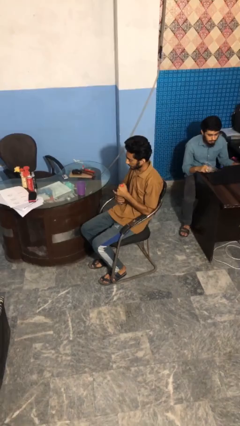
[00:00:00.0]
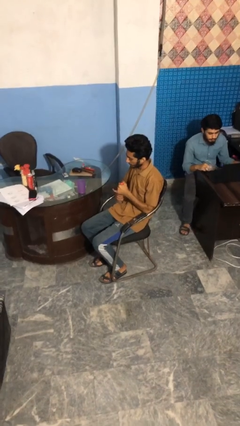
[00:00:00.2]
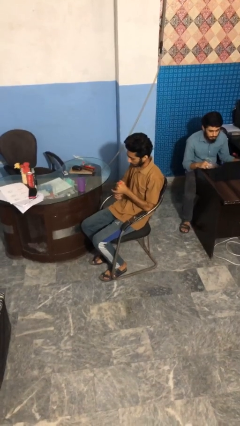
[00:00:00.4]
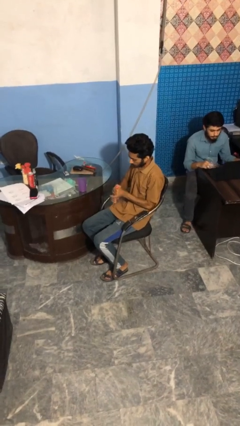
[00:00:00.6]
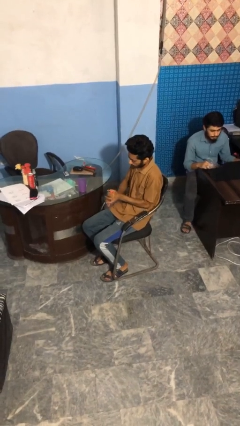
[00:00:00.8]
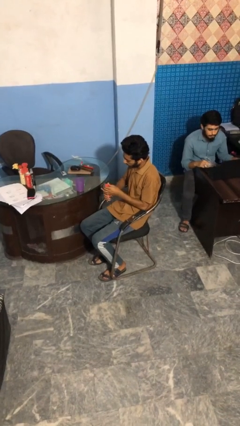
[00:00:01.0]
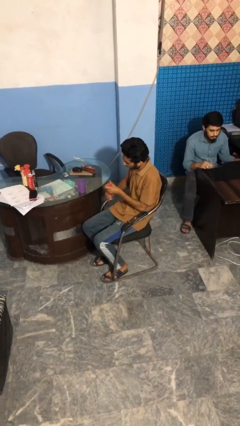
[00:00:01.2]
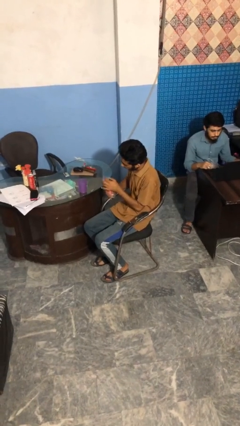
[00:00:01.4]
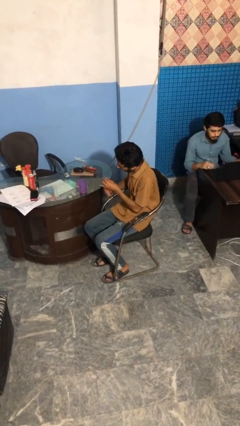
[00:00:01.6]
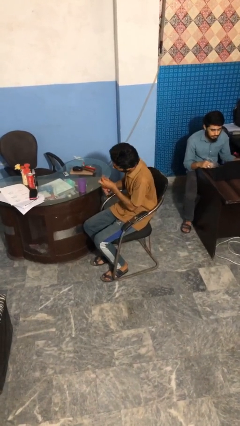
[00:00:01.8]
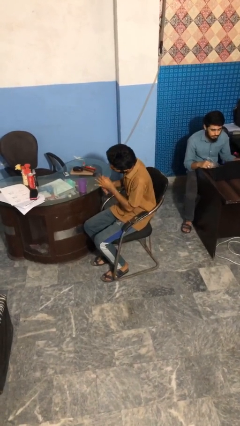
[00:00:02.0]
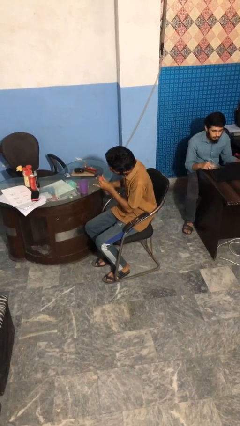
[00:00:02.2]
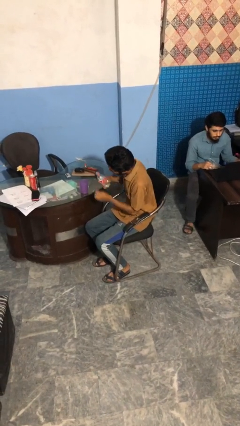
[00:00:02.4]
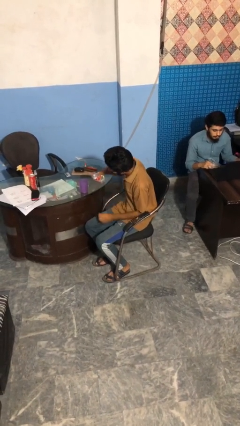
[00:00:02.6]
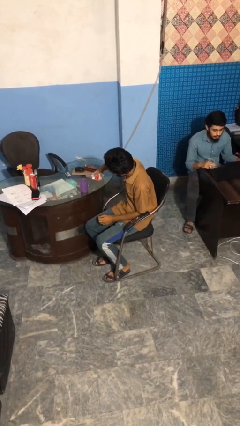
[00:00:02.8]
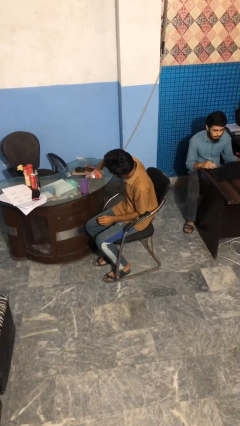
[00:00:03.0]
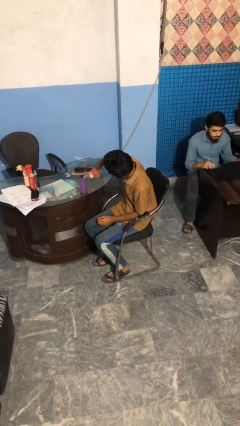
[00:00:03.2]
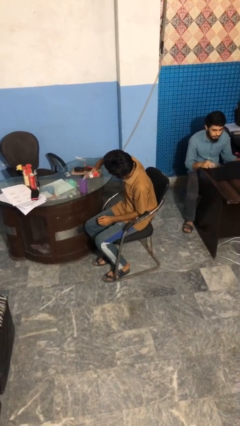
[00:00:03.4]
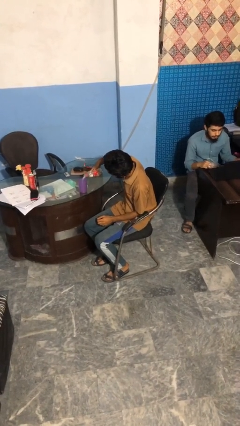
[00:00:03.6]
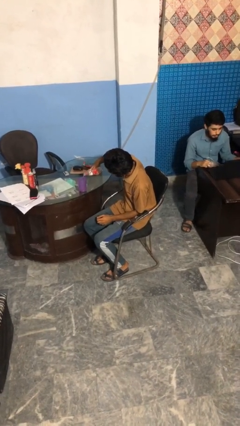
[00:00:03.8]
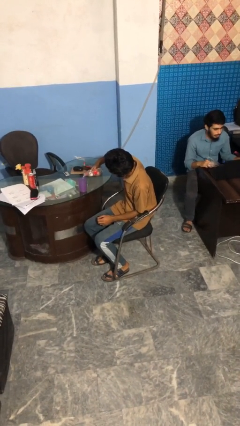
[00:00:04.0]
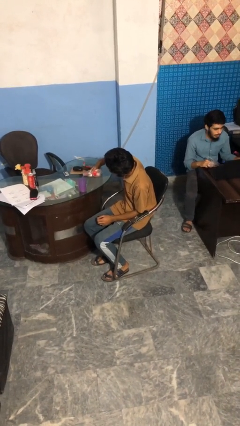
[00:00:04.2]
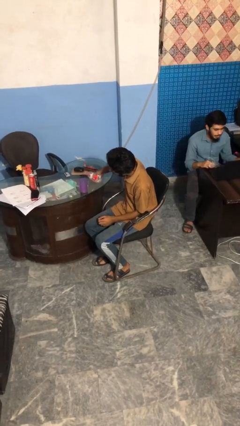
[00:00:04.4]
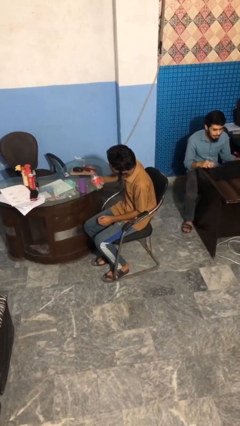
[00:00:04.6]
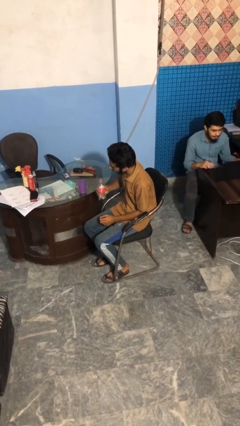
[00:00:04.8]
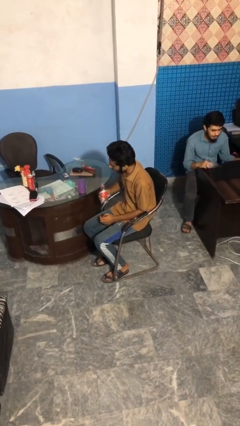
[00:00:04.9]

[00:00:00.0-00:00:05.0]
person pours liquid into cup

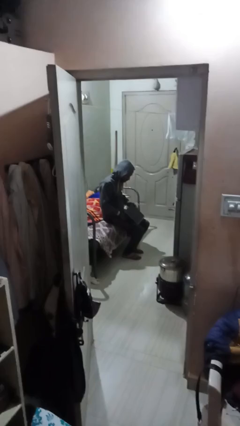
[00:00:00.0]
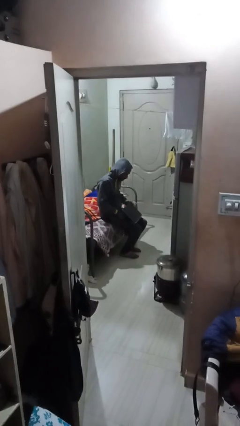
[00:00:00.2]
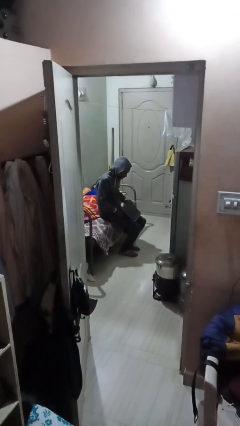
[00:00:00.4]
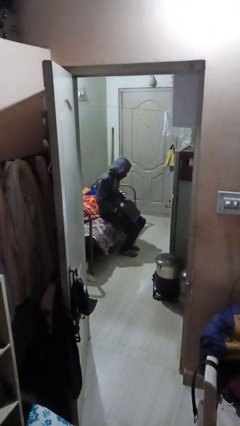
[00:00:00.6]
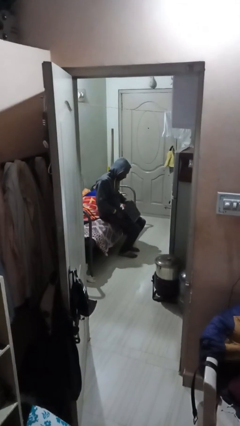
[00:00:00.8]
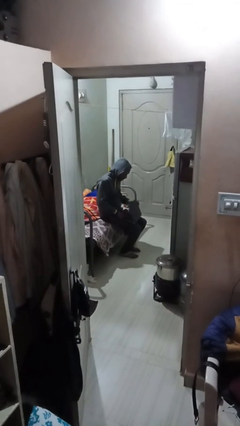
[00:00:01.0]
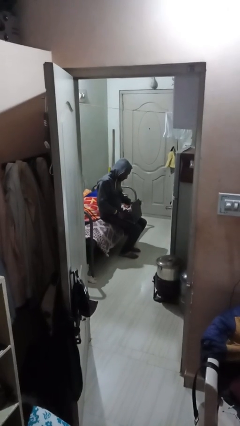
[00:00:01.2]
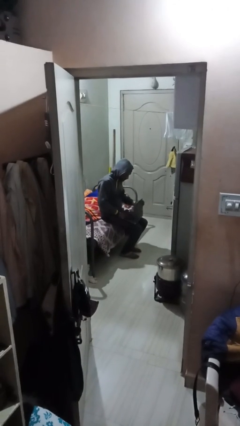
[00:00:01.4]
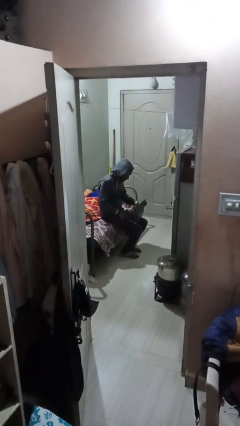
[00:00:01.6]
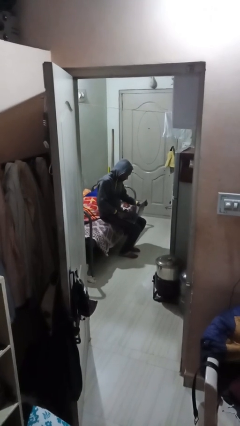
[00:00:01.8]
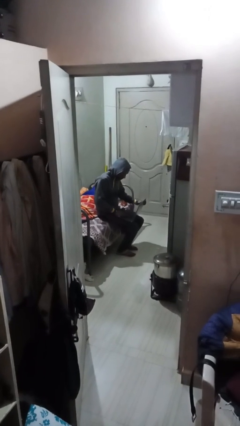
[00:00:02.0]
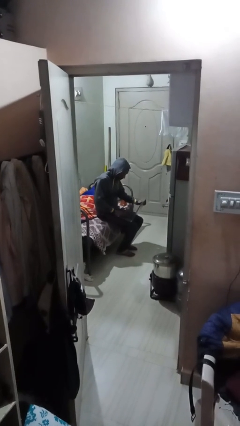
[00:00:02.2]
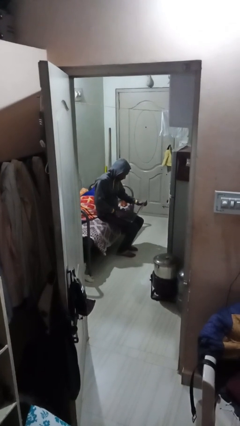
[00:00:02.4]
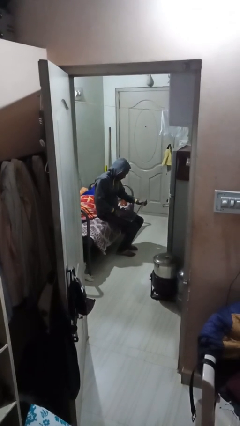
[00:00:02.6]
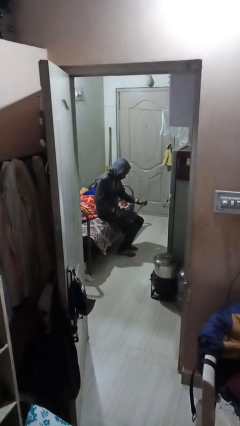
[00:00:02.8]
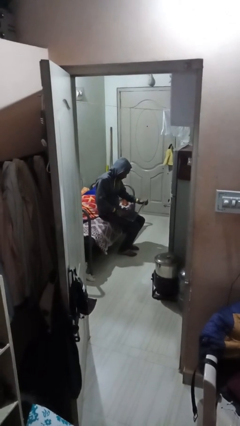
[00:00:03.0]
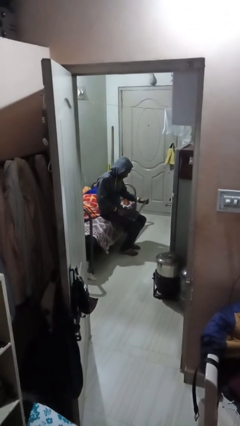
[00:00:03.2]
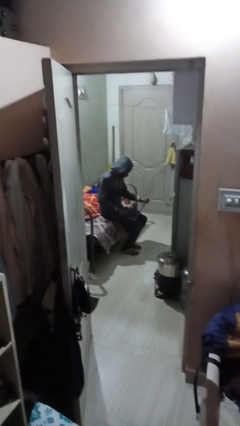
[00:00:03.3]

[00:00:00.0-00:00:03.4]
person interacts with laptop

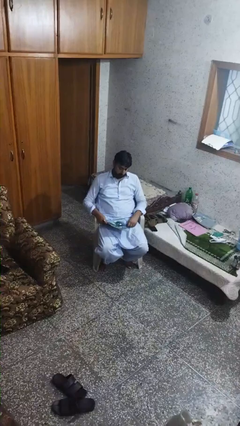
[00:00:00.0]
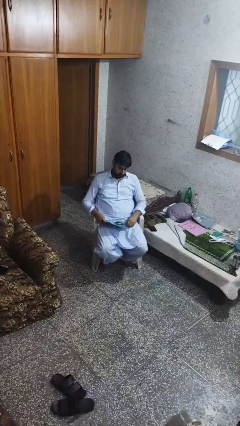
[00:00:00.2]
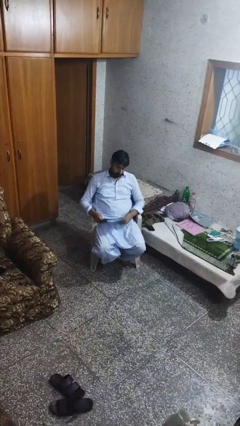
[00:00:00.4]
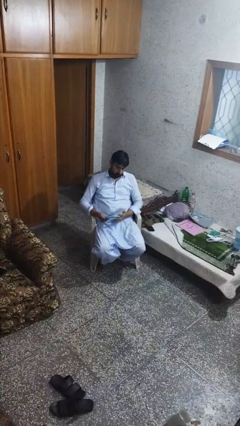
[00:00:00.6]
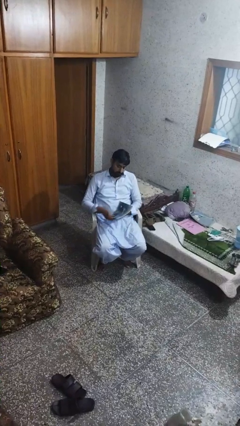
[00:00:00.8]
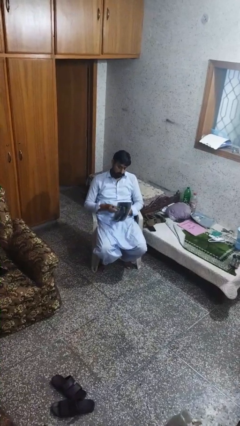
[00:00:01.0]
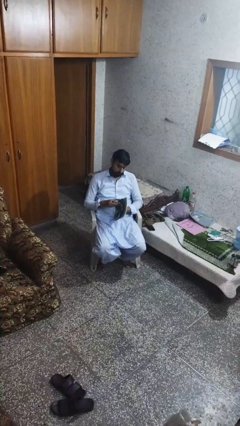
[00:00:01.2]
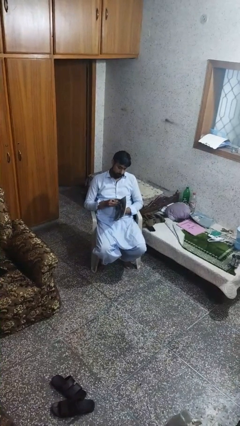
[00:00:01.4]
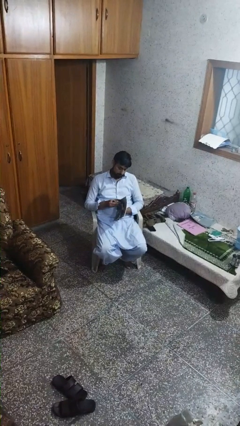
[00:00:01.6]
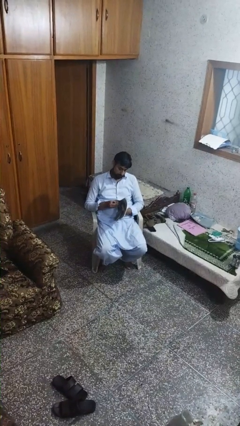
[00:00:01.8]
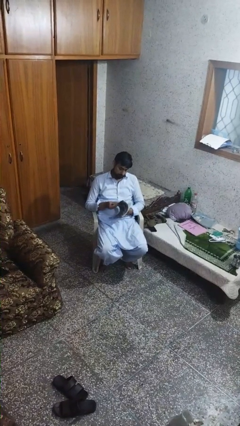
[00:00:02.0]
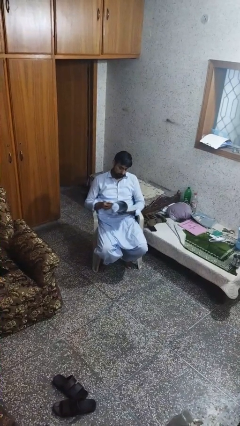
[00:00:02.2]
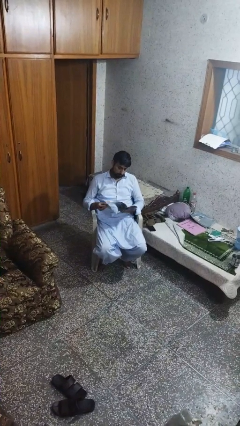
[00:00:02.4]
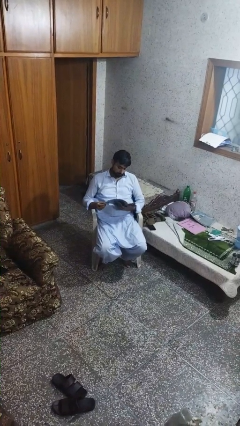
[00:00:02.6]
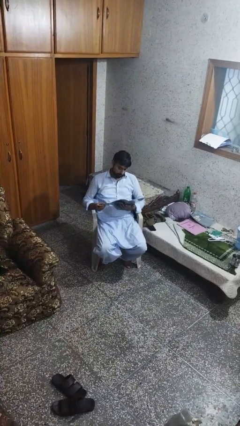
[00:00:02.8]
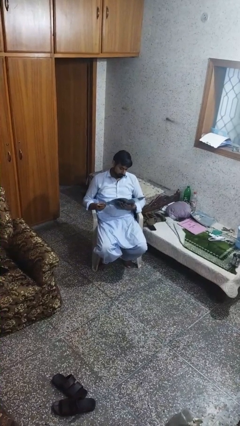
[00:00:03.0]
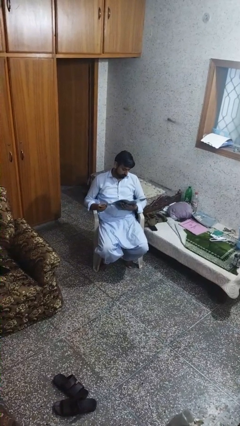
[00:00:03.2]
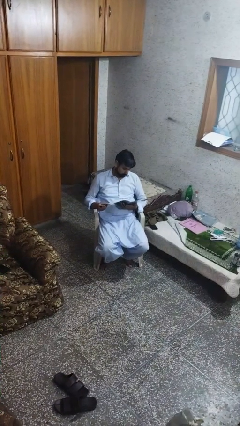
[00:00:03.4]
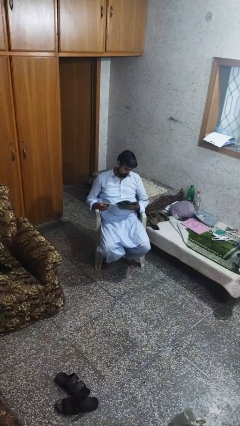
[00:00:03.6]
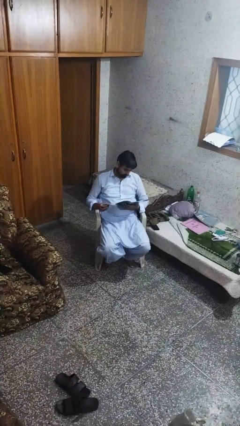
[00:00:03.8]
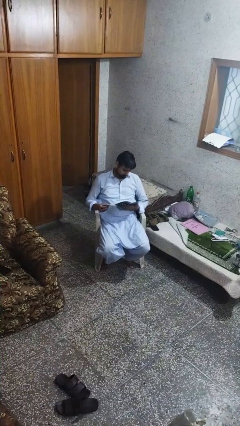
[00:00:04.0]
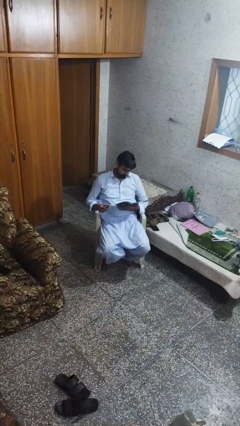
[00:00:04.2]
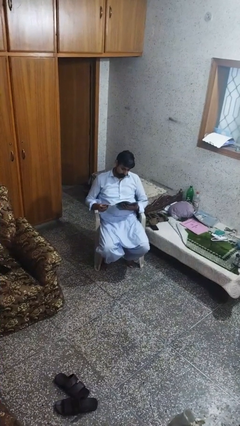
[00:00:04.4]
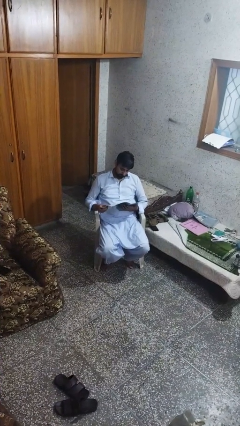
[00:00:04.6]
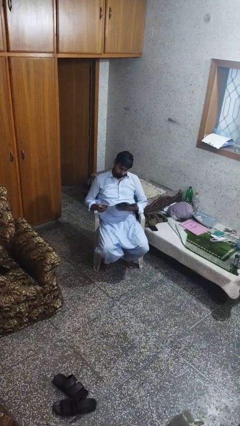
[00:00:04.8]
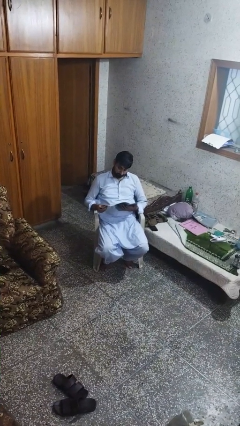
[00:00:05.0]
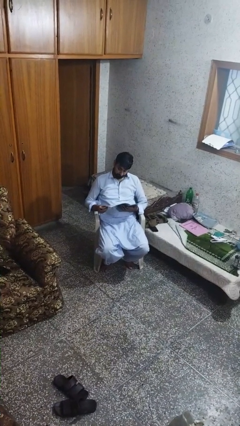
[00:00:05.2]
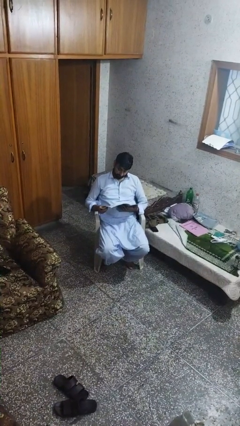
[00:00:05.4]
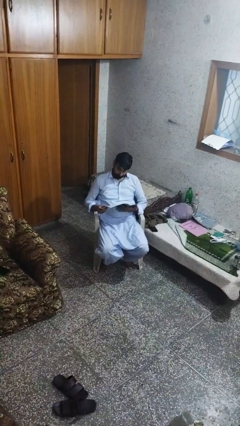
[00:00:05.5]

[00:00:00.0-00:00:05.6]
person reads magazine

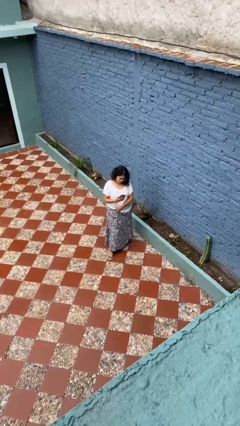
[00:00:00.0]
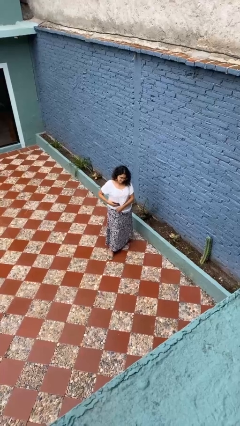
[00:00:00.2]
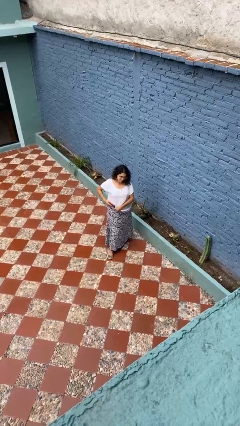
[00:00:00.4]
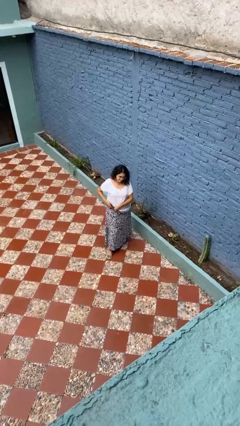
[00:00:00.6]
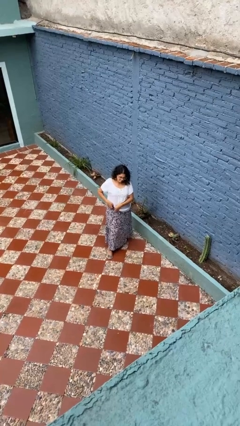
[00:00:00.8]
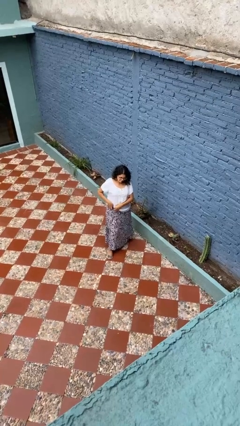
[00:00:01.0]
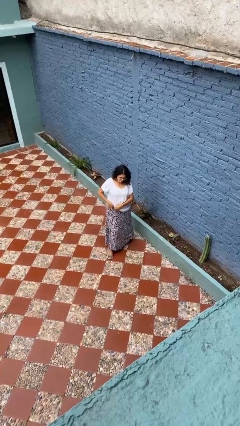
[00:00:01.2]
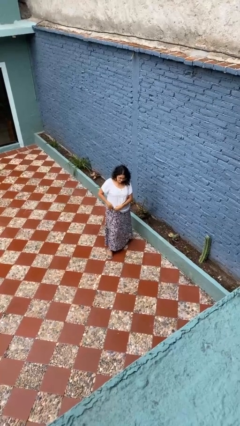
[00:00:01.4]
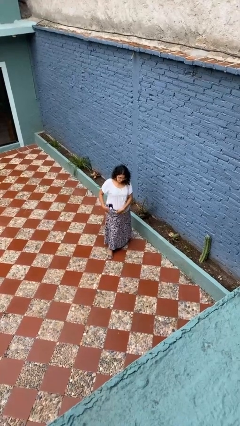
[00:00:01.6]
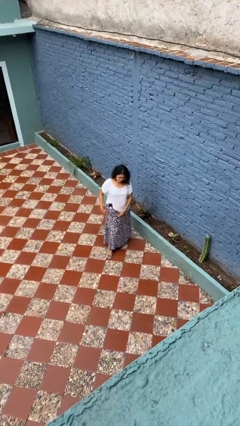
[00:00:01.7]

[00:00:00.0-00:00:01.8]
person puts phone into pocket

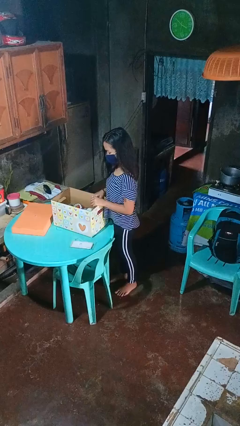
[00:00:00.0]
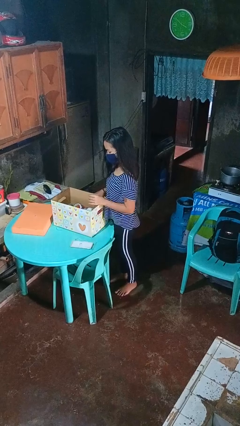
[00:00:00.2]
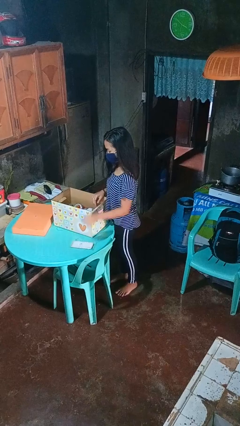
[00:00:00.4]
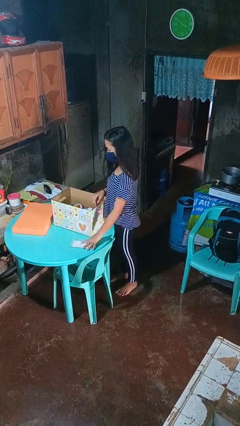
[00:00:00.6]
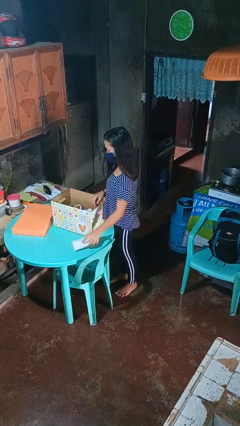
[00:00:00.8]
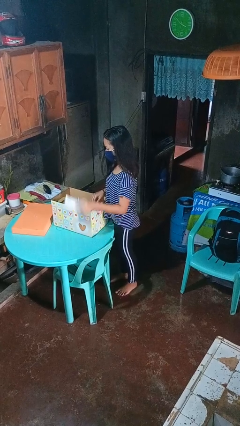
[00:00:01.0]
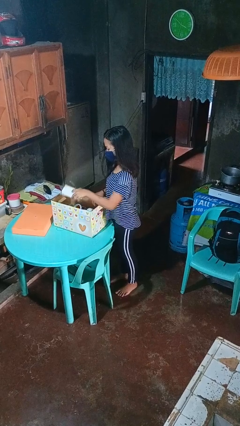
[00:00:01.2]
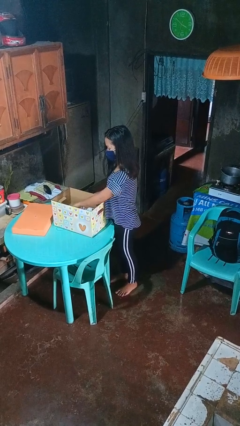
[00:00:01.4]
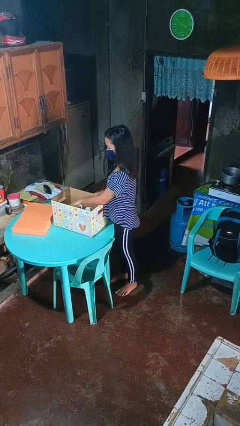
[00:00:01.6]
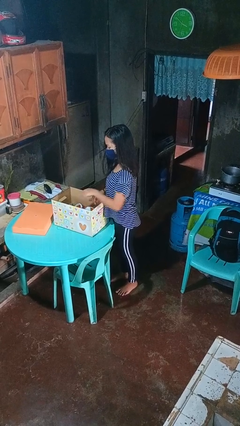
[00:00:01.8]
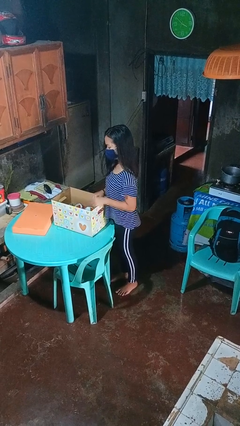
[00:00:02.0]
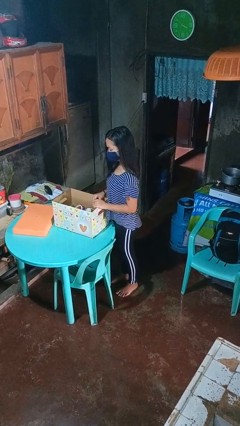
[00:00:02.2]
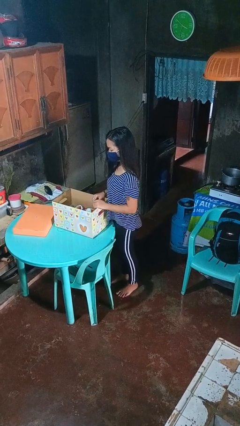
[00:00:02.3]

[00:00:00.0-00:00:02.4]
person puts object into box
